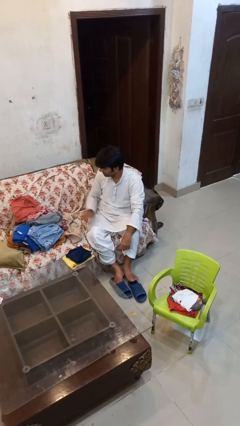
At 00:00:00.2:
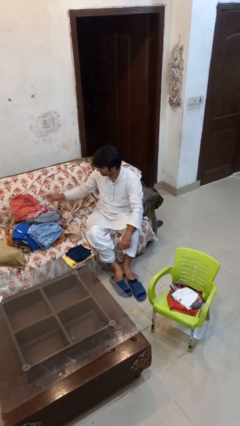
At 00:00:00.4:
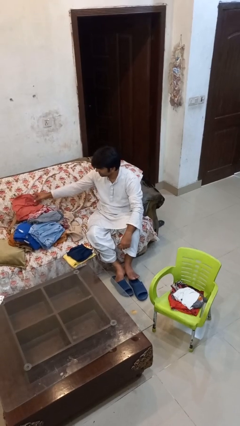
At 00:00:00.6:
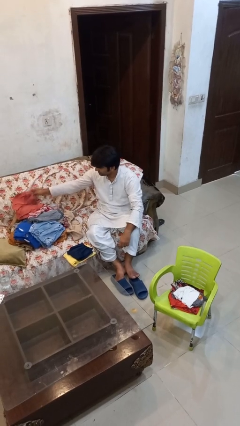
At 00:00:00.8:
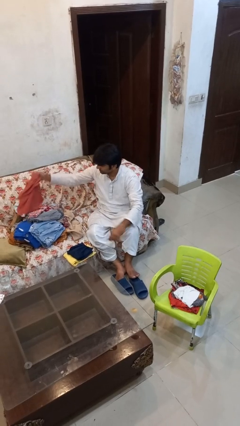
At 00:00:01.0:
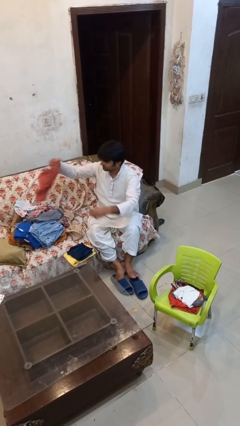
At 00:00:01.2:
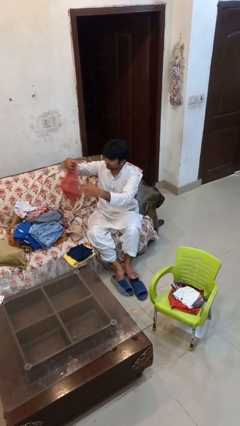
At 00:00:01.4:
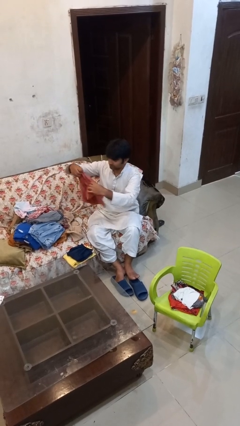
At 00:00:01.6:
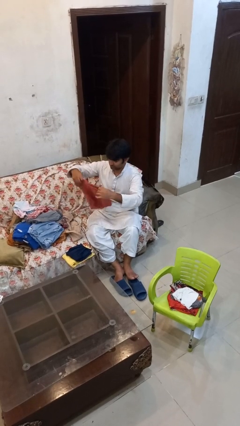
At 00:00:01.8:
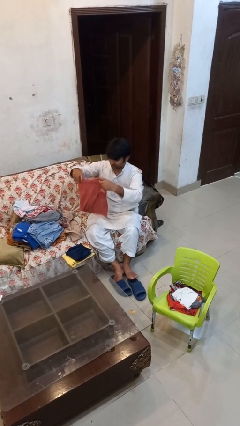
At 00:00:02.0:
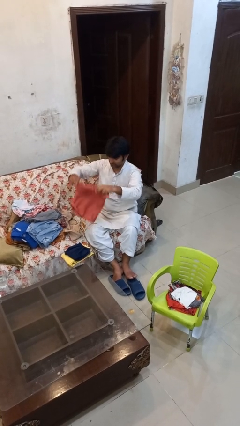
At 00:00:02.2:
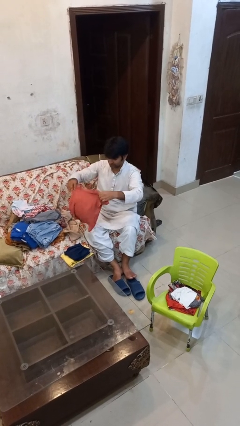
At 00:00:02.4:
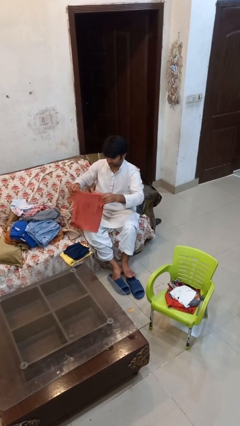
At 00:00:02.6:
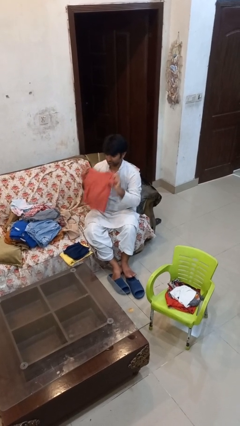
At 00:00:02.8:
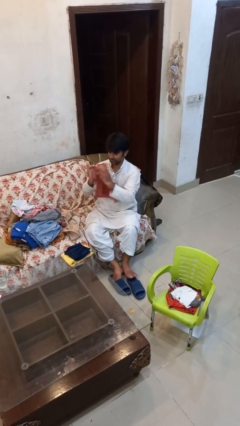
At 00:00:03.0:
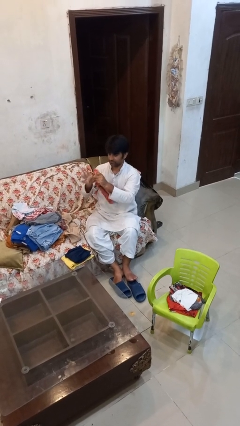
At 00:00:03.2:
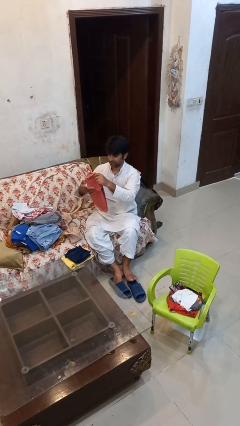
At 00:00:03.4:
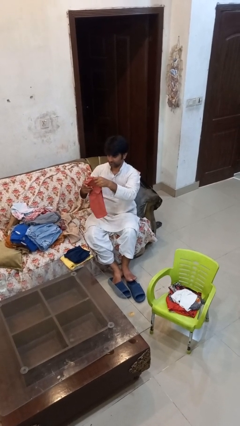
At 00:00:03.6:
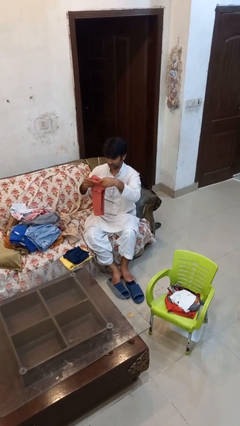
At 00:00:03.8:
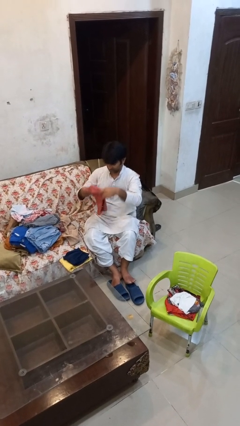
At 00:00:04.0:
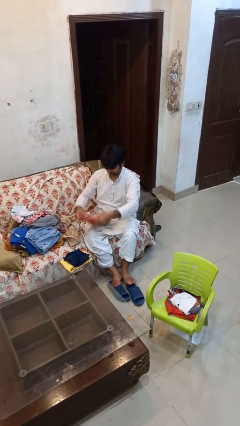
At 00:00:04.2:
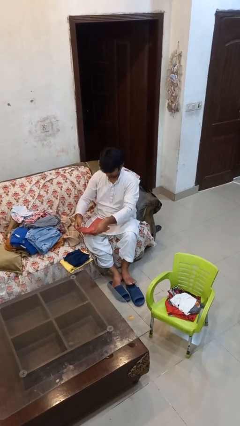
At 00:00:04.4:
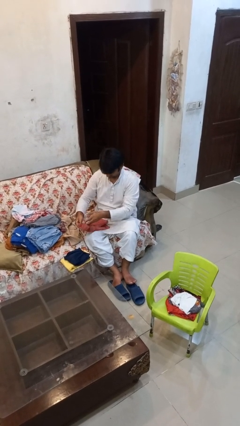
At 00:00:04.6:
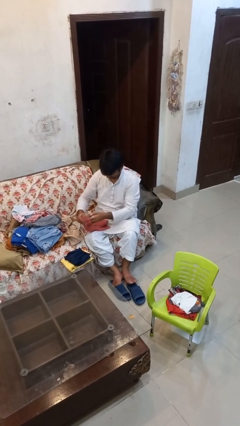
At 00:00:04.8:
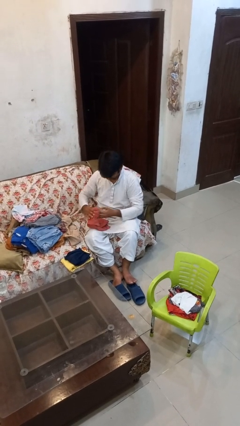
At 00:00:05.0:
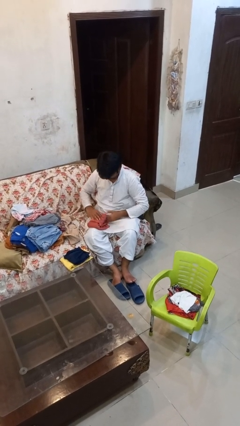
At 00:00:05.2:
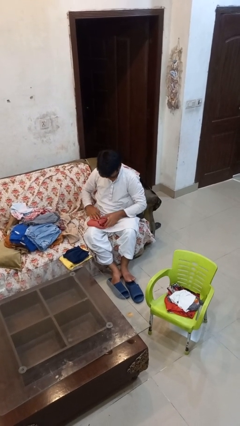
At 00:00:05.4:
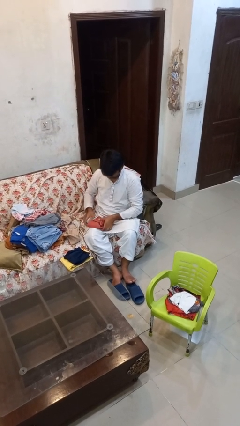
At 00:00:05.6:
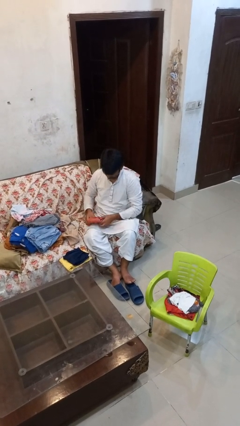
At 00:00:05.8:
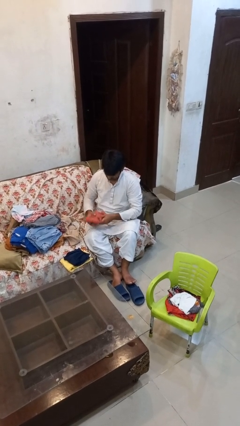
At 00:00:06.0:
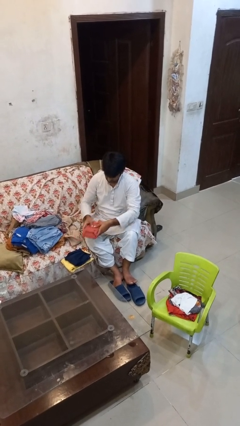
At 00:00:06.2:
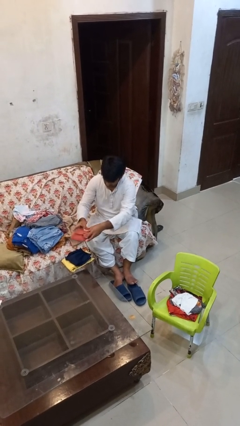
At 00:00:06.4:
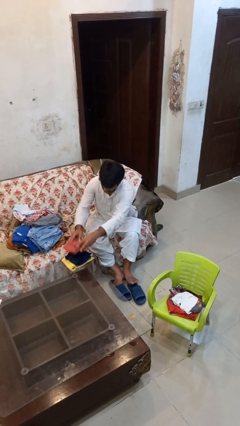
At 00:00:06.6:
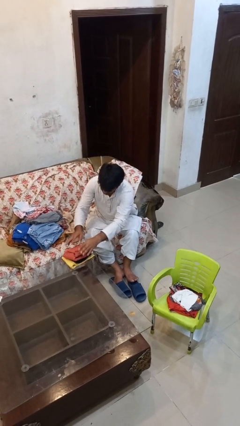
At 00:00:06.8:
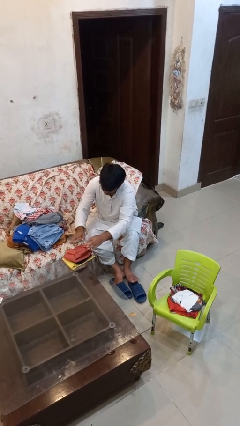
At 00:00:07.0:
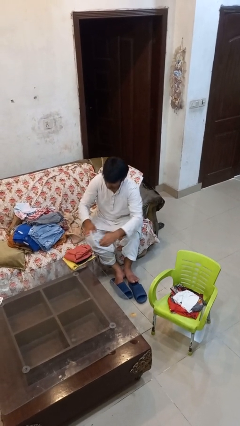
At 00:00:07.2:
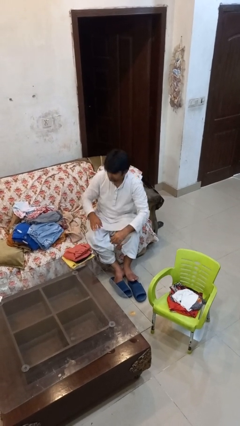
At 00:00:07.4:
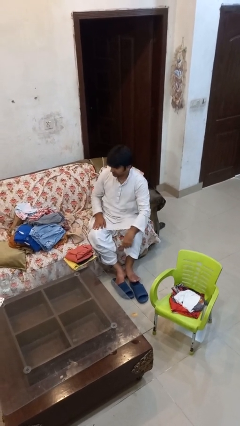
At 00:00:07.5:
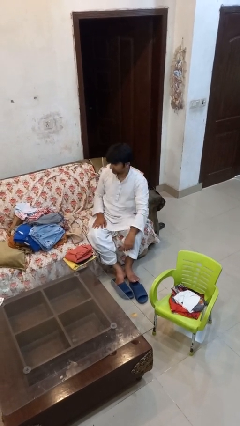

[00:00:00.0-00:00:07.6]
person folds shirt

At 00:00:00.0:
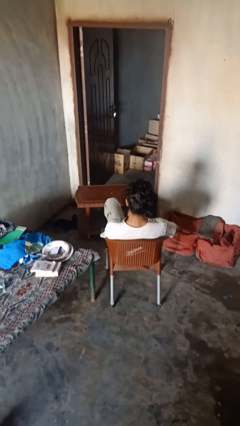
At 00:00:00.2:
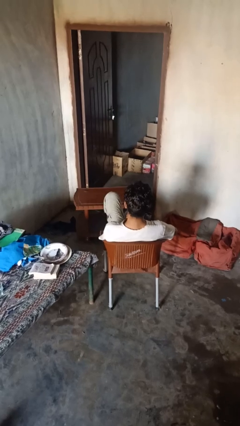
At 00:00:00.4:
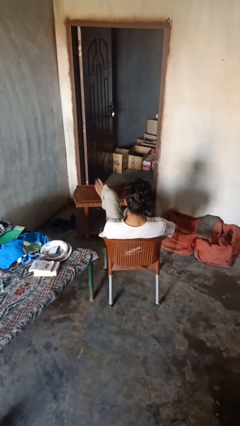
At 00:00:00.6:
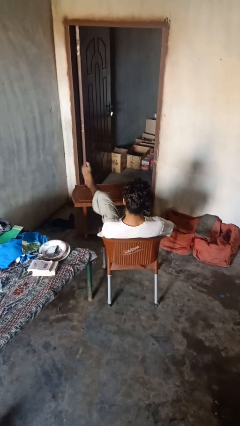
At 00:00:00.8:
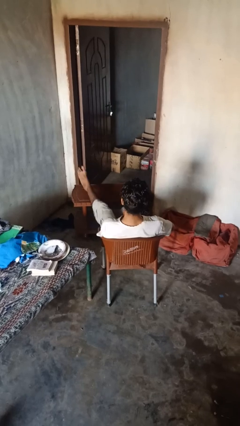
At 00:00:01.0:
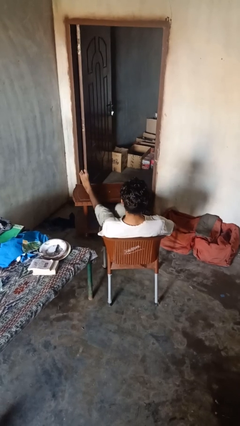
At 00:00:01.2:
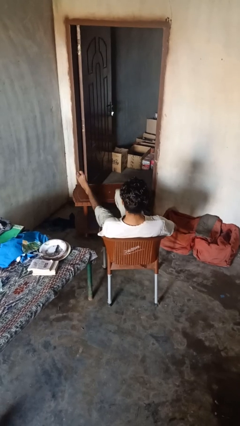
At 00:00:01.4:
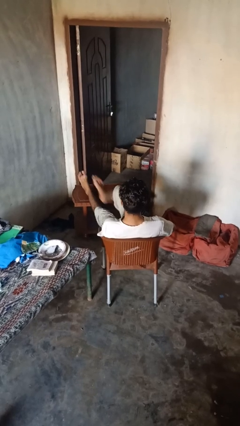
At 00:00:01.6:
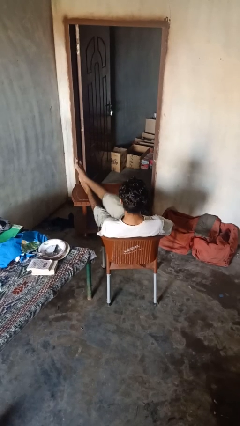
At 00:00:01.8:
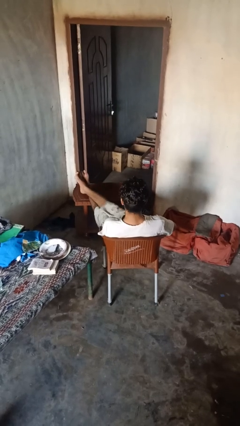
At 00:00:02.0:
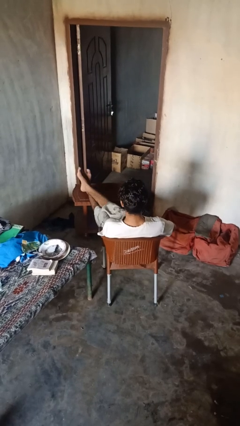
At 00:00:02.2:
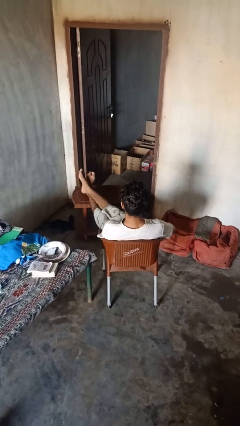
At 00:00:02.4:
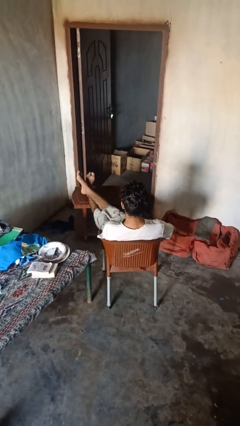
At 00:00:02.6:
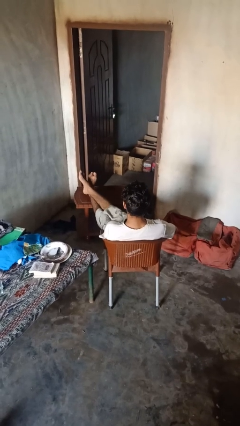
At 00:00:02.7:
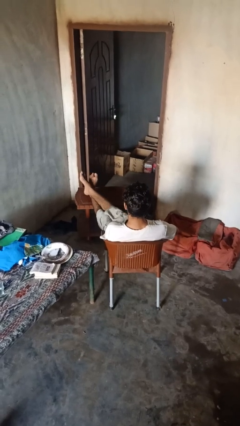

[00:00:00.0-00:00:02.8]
person puts feet up

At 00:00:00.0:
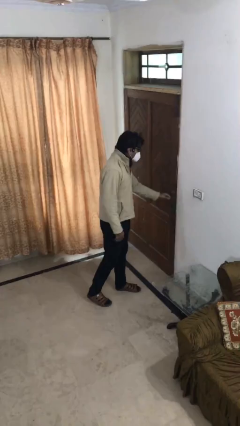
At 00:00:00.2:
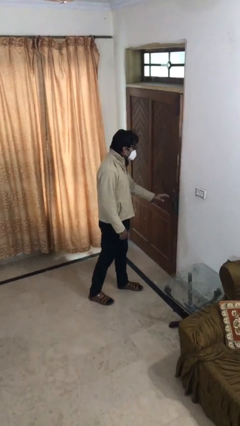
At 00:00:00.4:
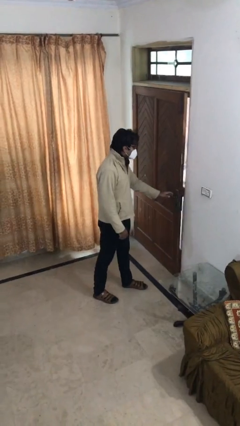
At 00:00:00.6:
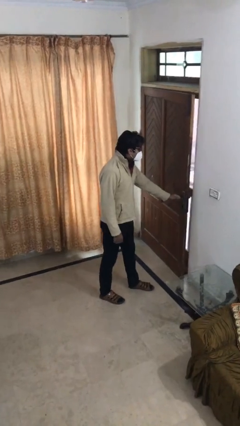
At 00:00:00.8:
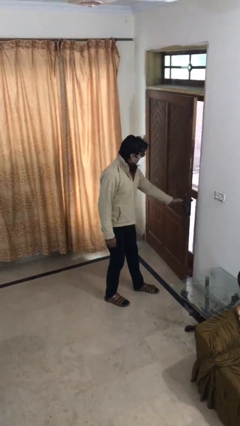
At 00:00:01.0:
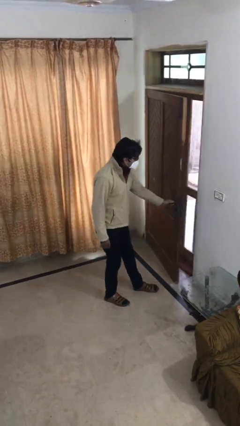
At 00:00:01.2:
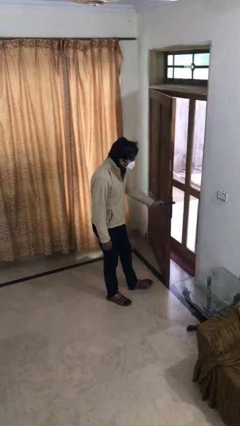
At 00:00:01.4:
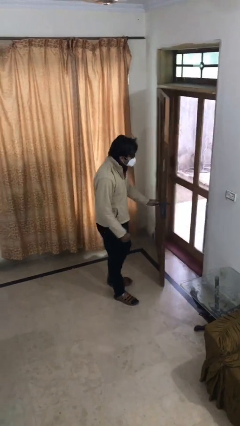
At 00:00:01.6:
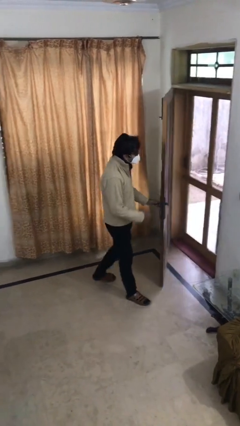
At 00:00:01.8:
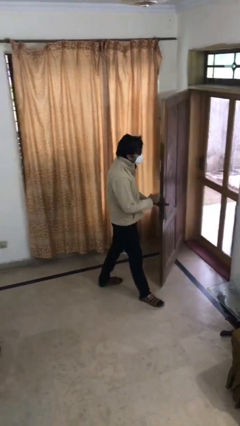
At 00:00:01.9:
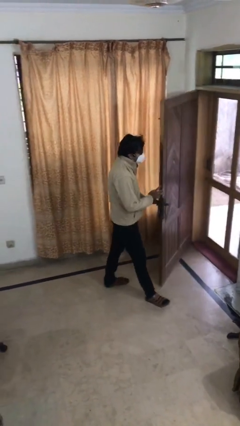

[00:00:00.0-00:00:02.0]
person opens facility door

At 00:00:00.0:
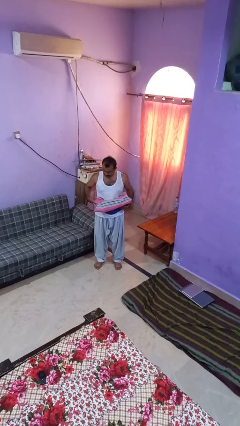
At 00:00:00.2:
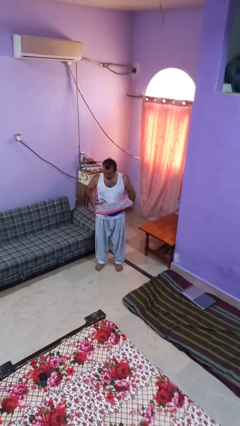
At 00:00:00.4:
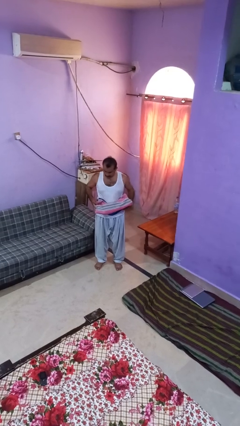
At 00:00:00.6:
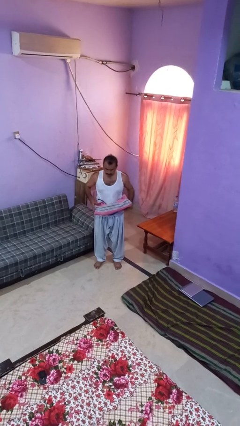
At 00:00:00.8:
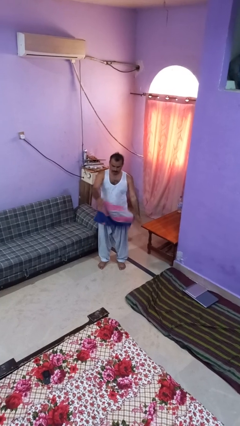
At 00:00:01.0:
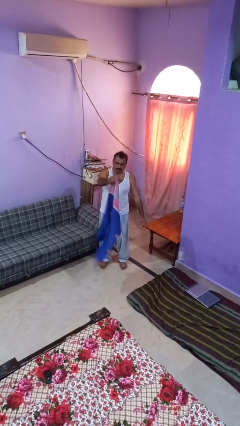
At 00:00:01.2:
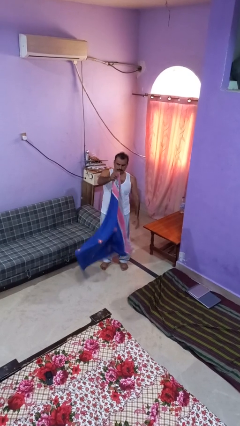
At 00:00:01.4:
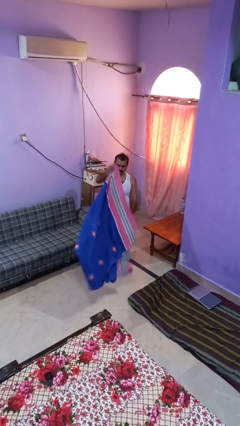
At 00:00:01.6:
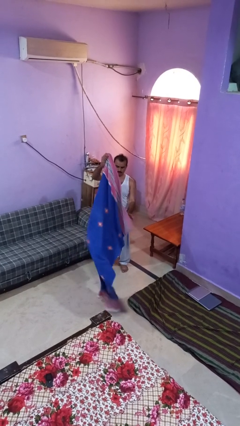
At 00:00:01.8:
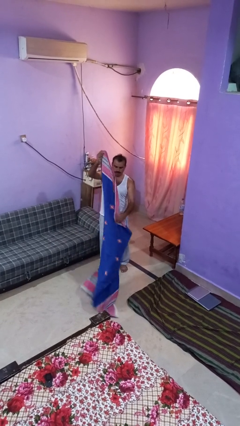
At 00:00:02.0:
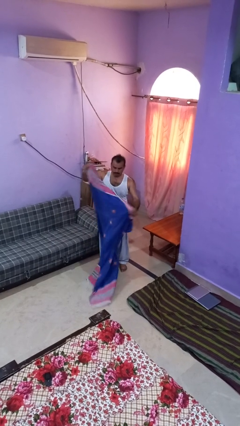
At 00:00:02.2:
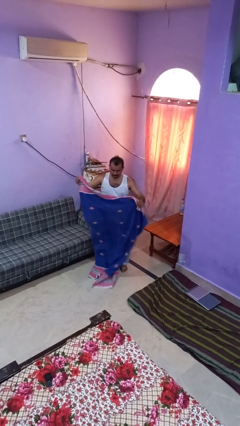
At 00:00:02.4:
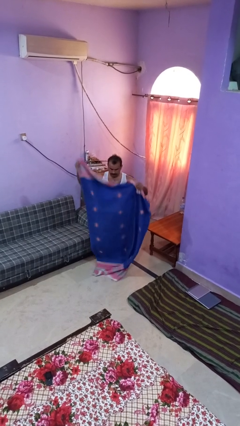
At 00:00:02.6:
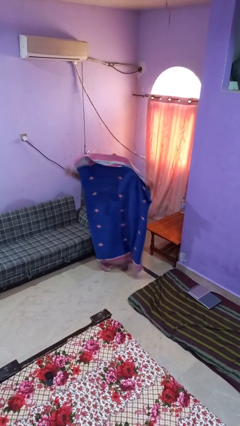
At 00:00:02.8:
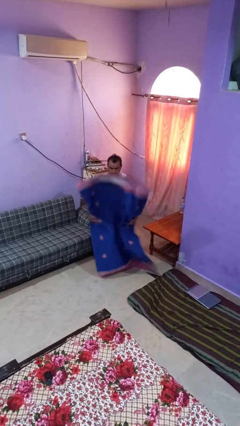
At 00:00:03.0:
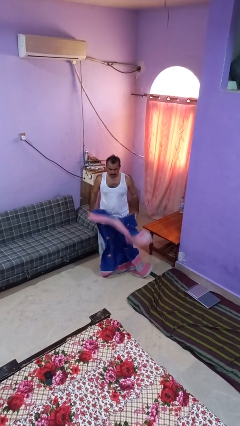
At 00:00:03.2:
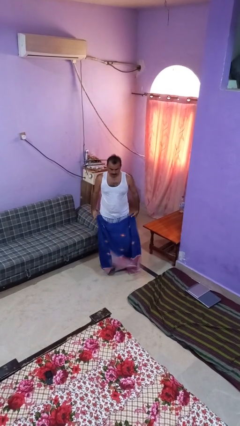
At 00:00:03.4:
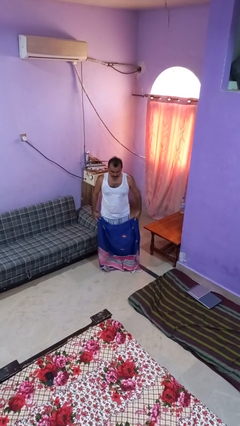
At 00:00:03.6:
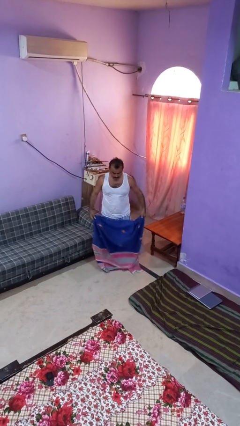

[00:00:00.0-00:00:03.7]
person unfolds blanket

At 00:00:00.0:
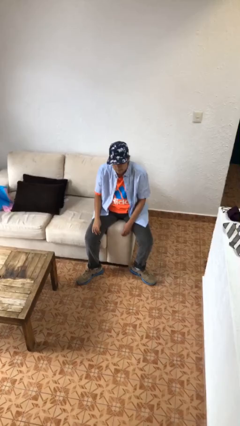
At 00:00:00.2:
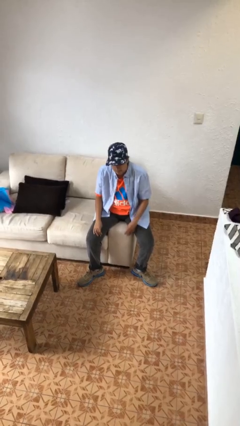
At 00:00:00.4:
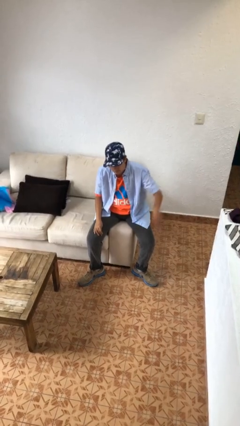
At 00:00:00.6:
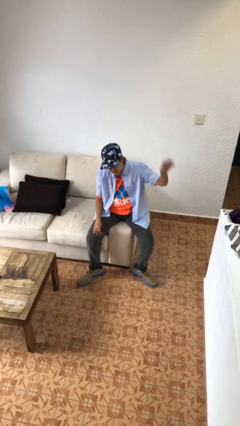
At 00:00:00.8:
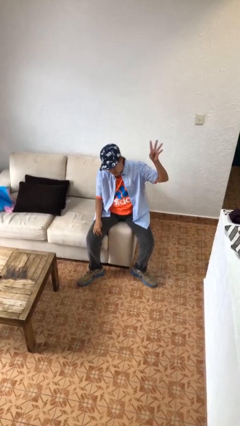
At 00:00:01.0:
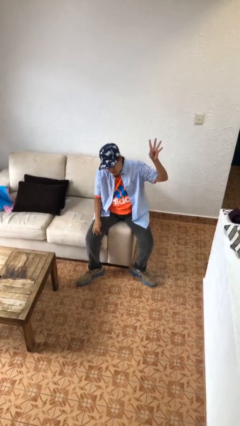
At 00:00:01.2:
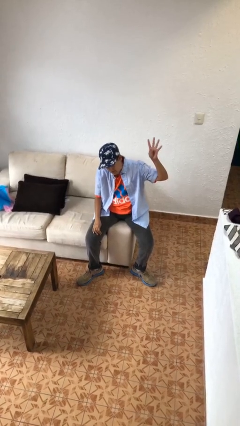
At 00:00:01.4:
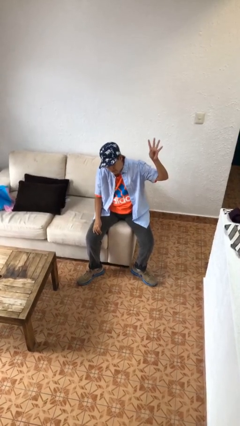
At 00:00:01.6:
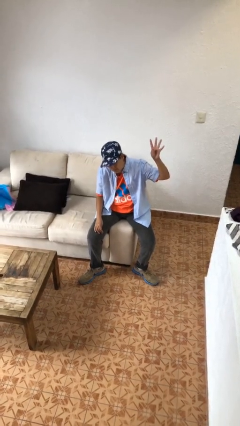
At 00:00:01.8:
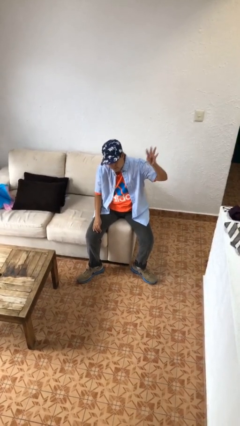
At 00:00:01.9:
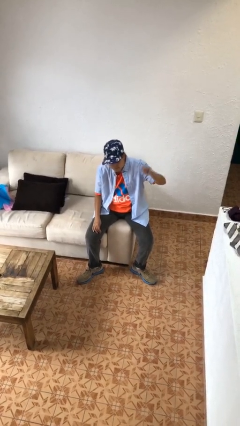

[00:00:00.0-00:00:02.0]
person gestures number four
